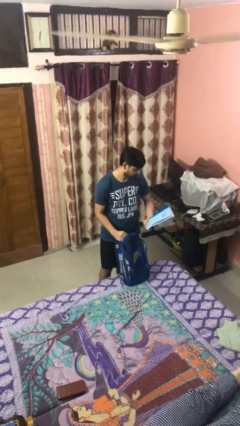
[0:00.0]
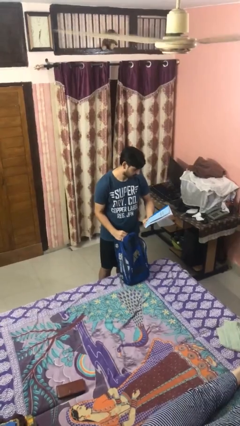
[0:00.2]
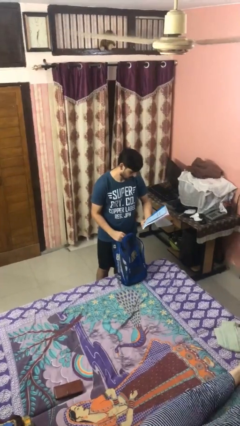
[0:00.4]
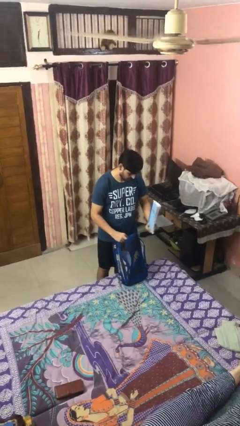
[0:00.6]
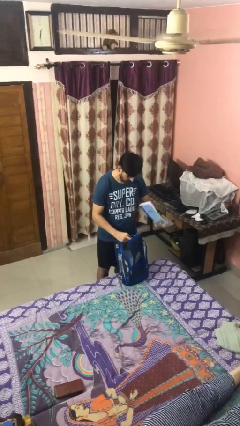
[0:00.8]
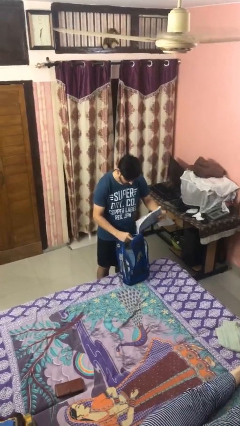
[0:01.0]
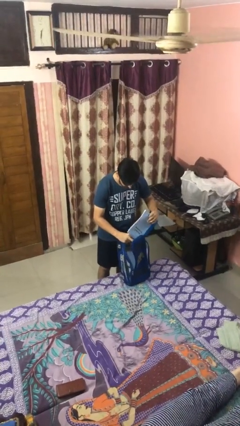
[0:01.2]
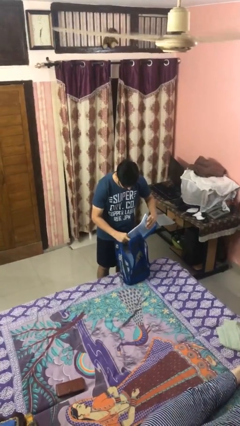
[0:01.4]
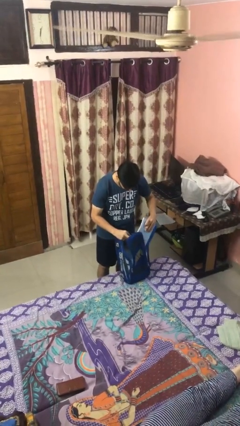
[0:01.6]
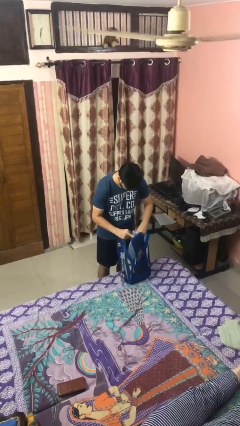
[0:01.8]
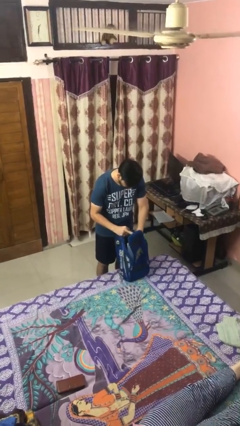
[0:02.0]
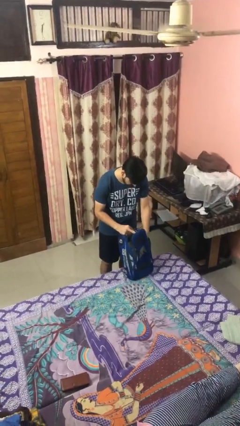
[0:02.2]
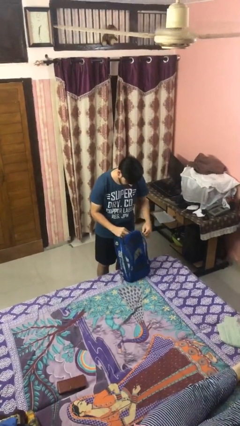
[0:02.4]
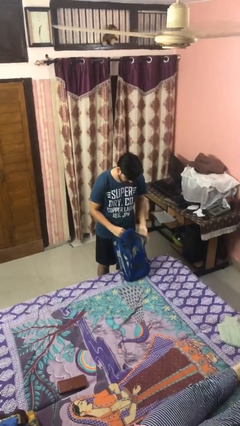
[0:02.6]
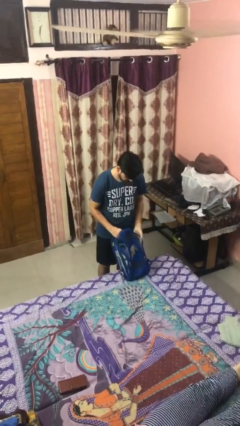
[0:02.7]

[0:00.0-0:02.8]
person puts object into purse

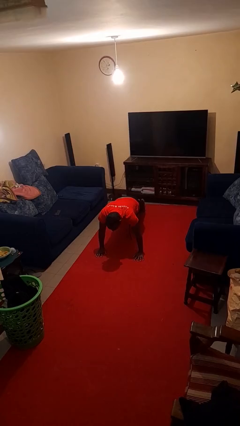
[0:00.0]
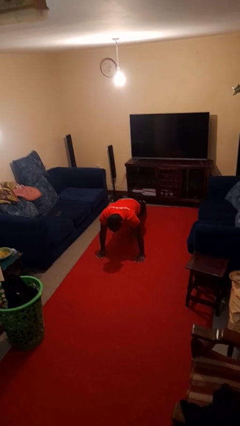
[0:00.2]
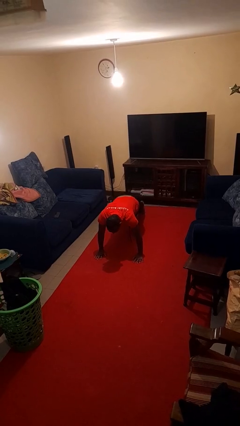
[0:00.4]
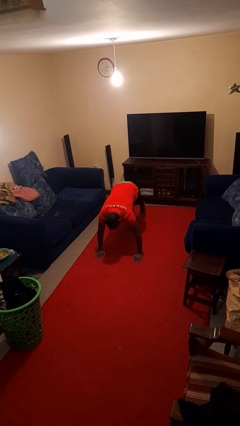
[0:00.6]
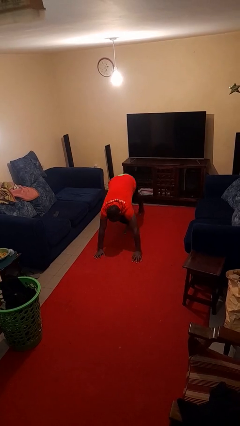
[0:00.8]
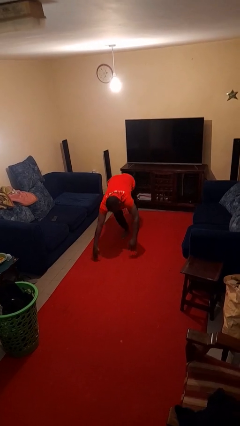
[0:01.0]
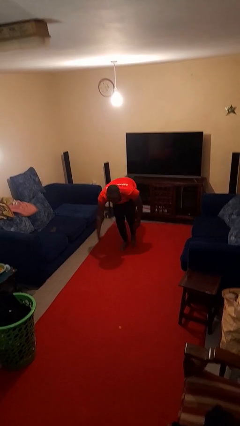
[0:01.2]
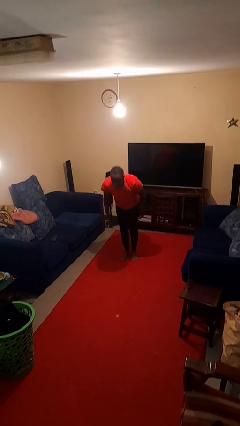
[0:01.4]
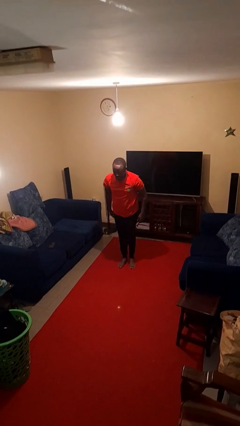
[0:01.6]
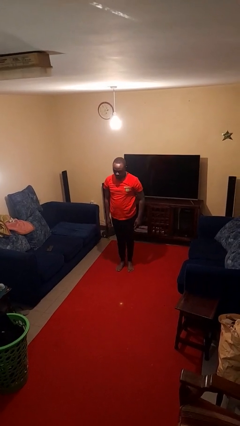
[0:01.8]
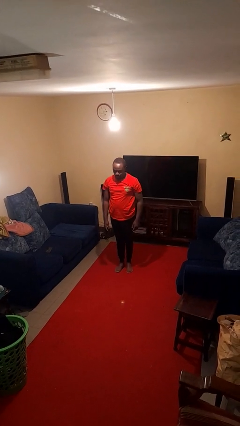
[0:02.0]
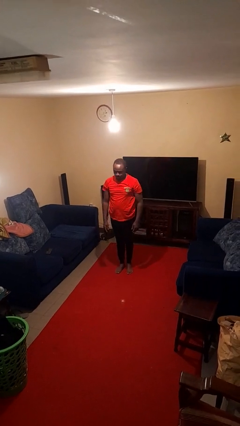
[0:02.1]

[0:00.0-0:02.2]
person stands up from floor

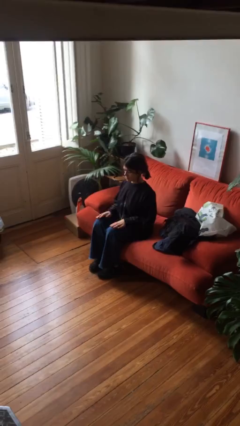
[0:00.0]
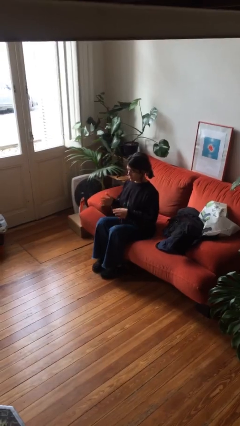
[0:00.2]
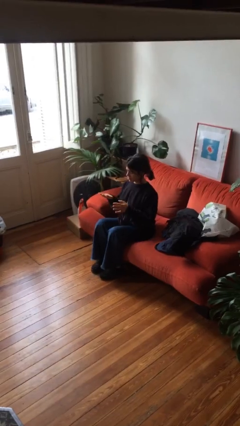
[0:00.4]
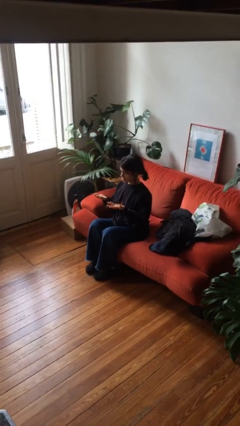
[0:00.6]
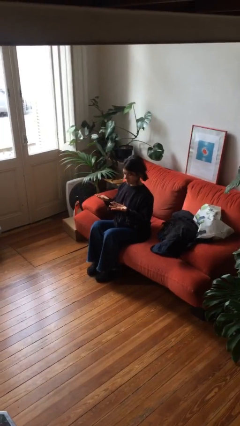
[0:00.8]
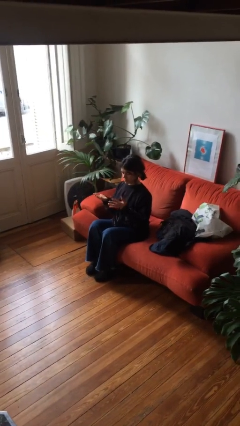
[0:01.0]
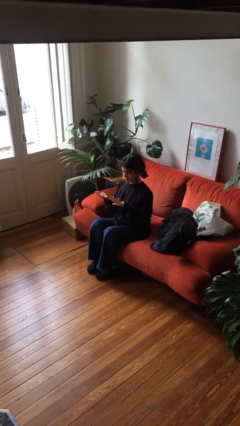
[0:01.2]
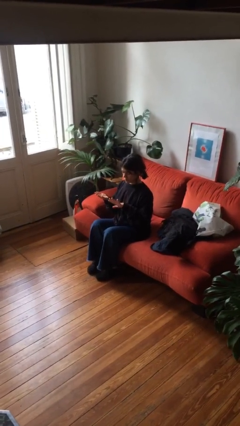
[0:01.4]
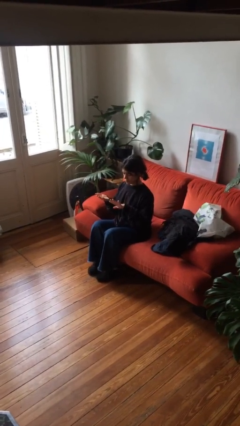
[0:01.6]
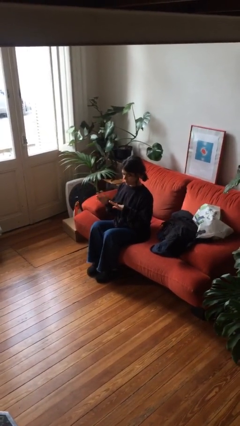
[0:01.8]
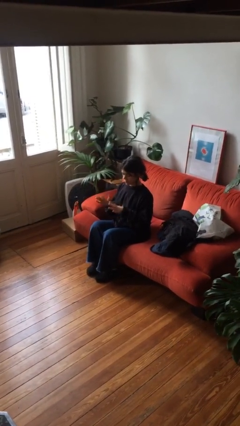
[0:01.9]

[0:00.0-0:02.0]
person looks at hands in lap

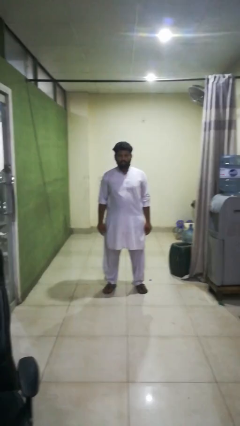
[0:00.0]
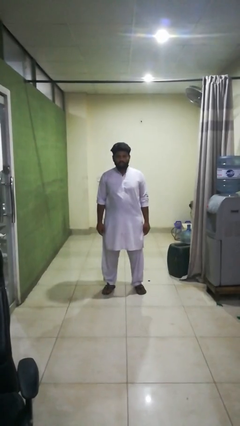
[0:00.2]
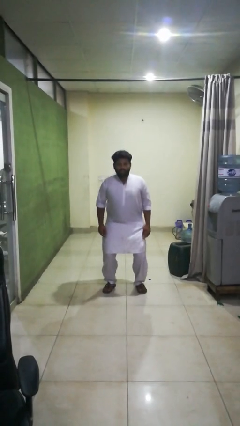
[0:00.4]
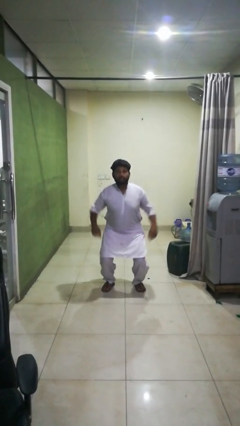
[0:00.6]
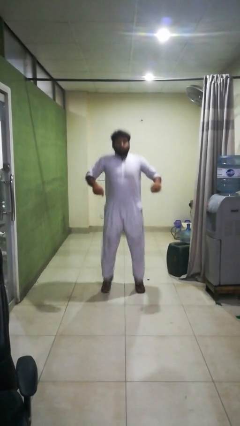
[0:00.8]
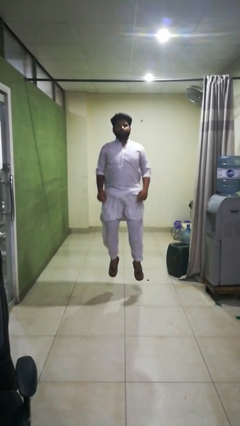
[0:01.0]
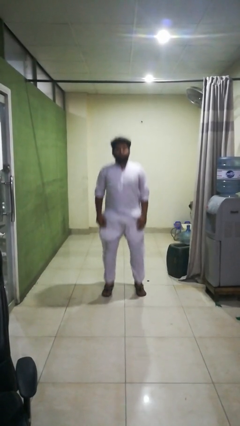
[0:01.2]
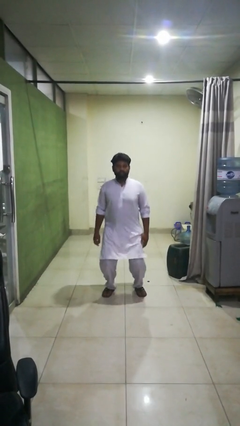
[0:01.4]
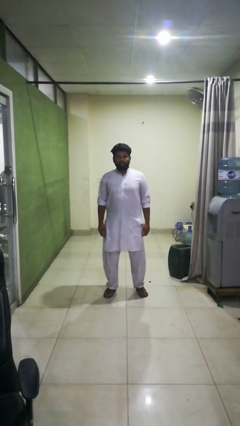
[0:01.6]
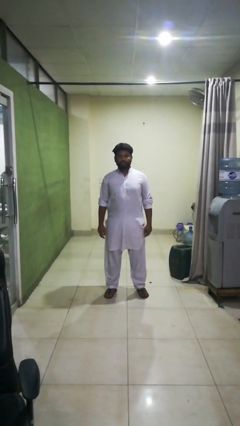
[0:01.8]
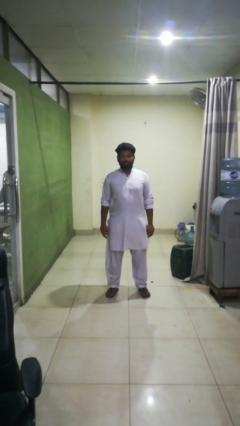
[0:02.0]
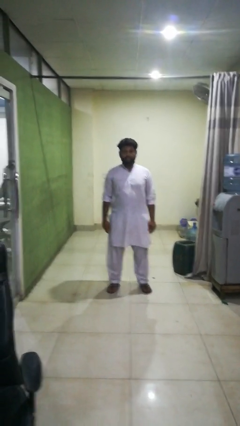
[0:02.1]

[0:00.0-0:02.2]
person jumps

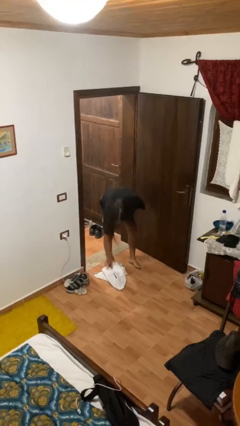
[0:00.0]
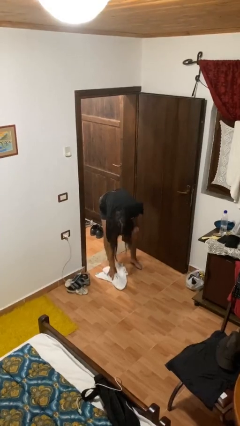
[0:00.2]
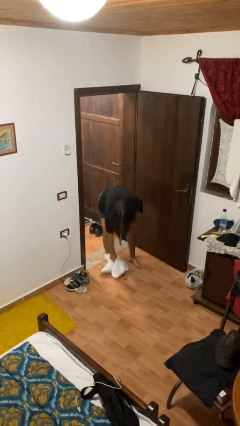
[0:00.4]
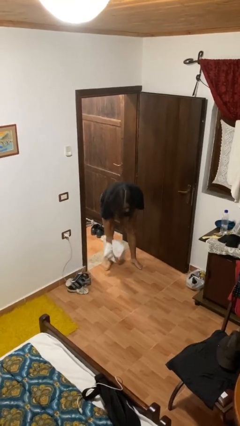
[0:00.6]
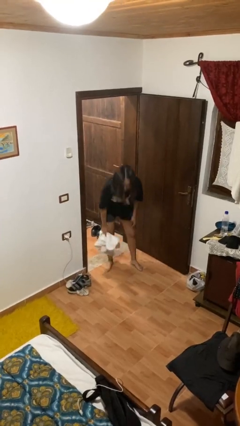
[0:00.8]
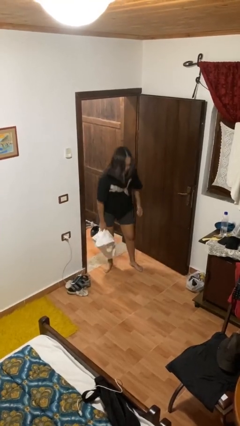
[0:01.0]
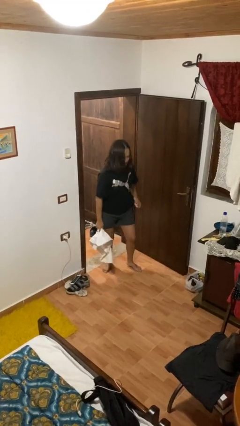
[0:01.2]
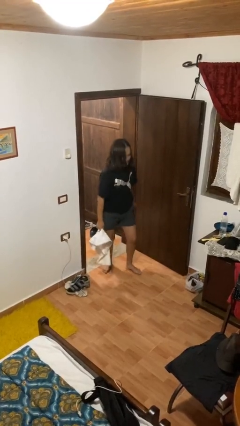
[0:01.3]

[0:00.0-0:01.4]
person picks up object from floor

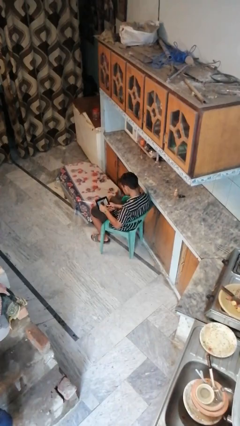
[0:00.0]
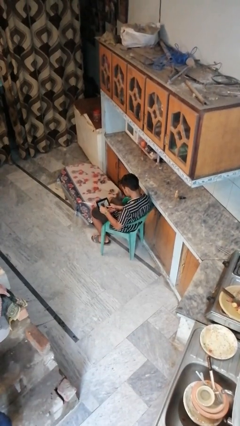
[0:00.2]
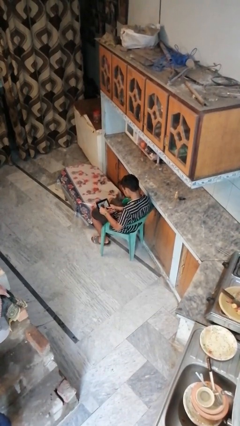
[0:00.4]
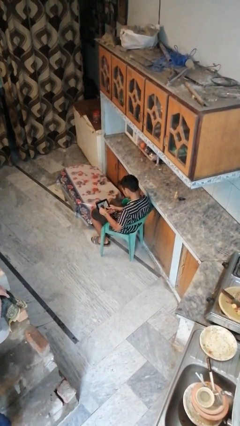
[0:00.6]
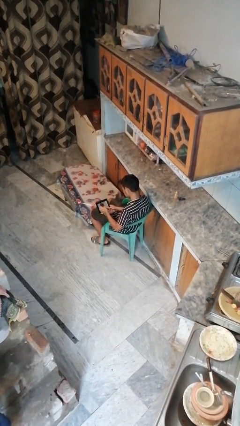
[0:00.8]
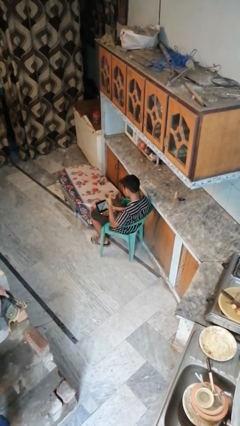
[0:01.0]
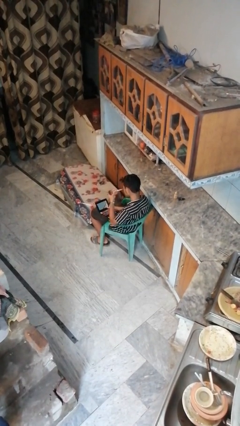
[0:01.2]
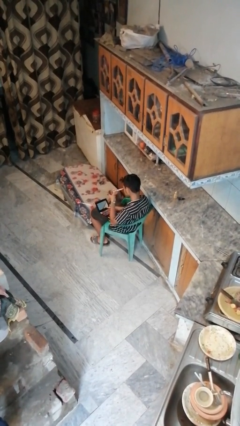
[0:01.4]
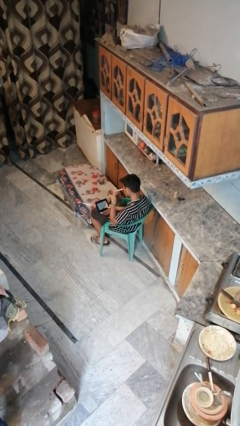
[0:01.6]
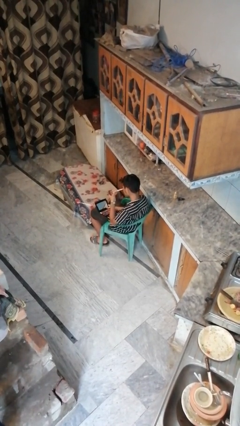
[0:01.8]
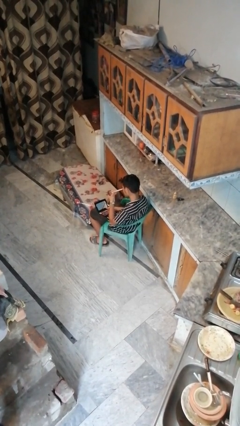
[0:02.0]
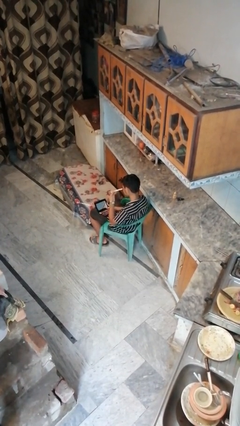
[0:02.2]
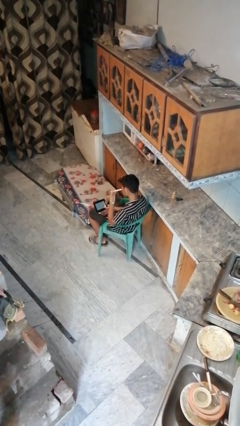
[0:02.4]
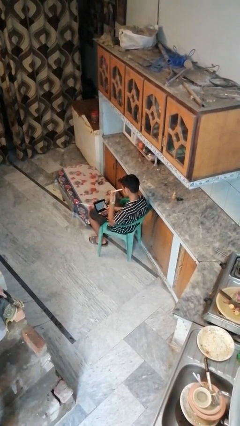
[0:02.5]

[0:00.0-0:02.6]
person applies eye makeup

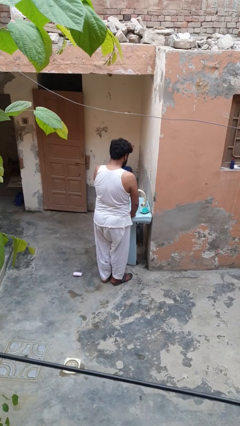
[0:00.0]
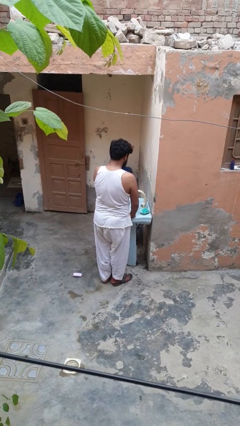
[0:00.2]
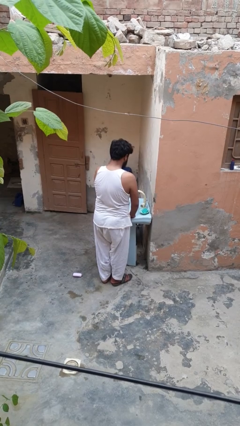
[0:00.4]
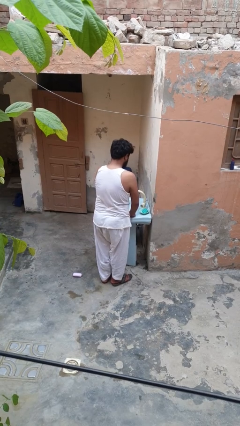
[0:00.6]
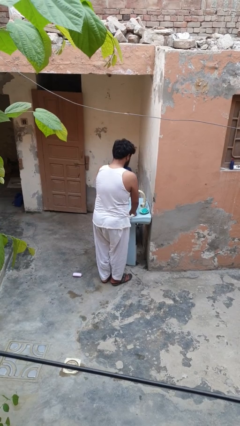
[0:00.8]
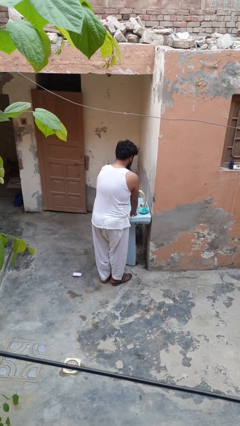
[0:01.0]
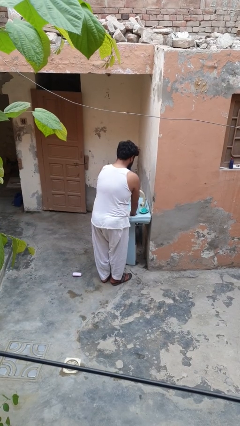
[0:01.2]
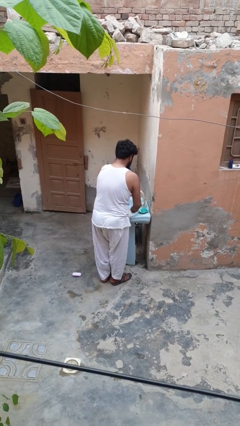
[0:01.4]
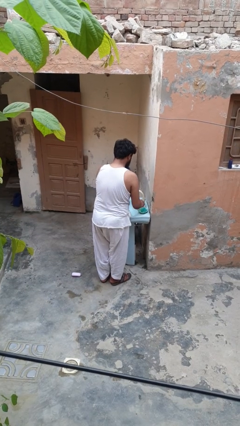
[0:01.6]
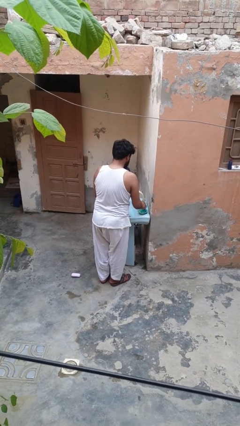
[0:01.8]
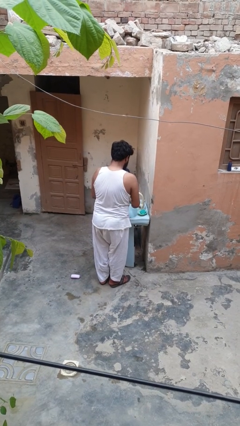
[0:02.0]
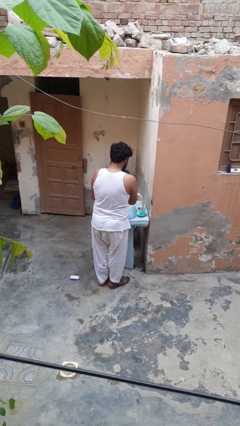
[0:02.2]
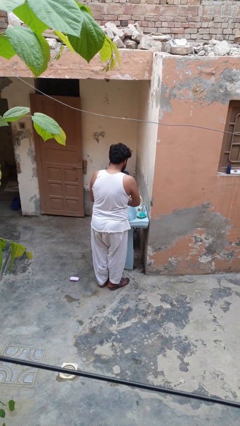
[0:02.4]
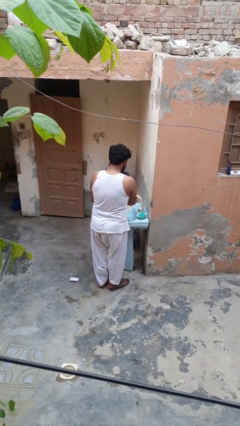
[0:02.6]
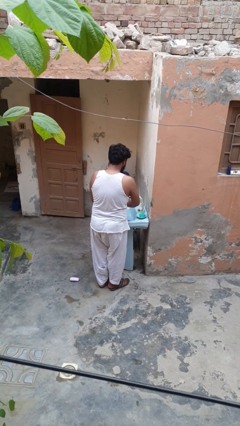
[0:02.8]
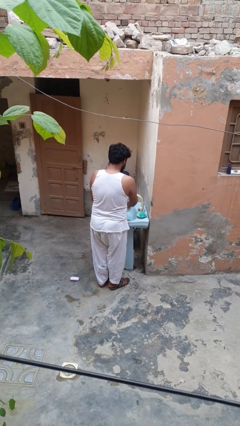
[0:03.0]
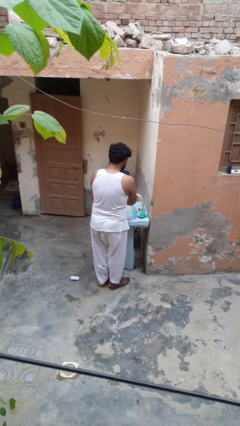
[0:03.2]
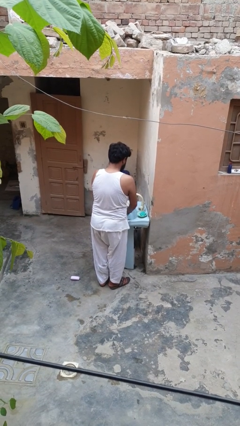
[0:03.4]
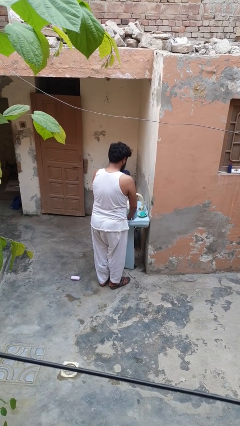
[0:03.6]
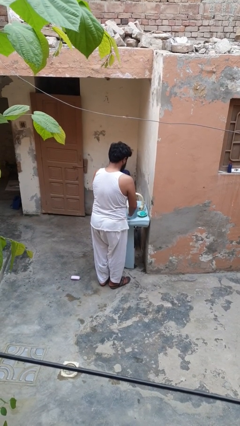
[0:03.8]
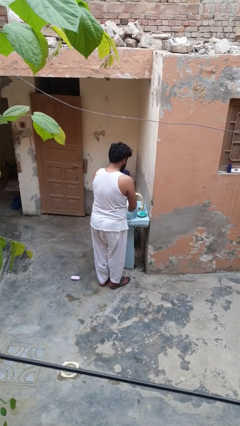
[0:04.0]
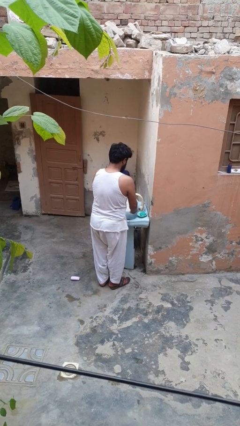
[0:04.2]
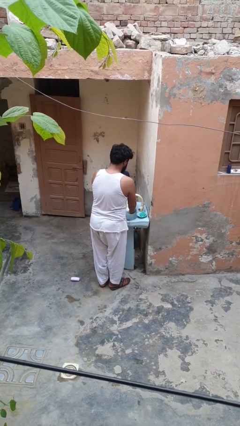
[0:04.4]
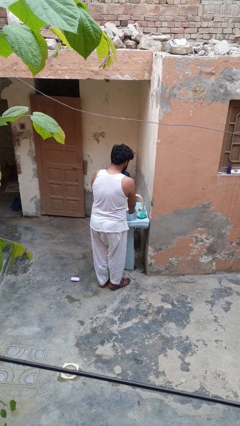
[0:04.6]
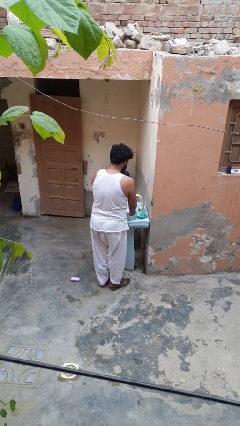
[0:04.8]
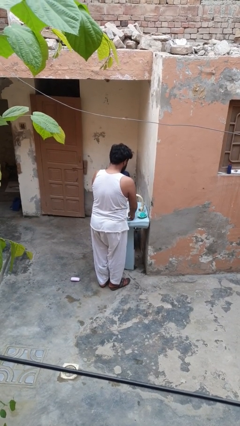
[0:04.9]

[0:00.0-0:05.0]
person washes dish
